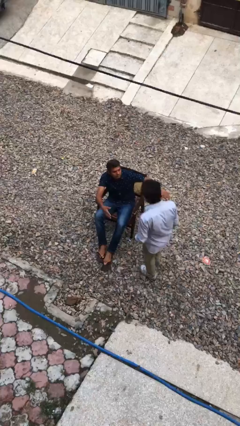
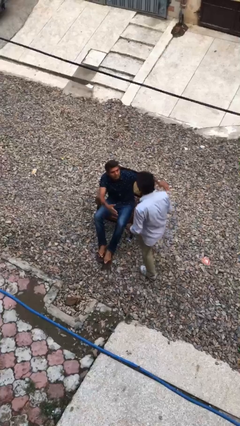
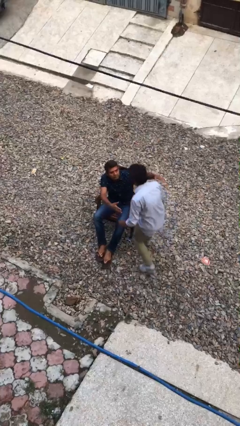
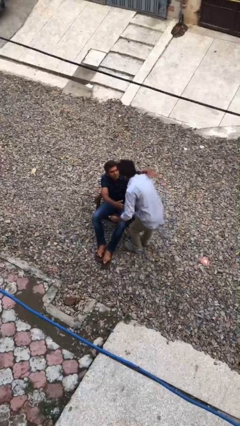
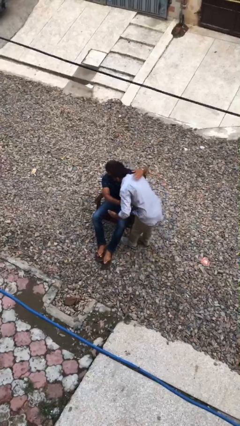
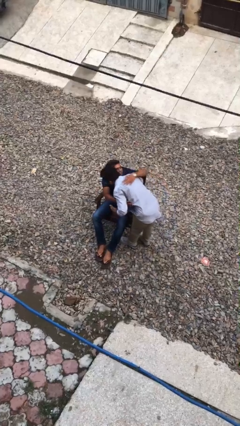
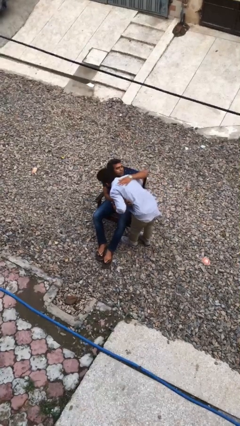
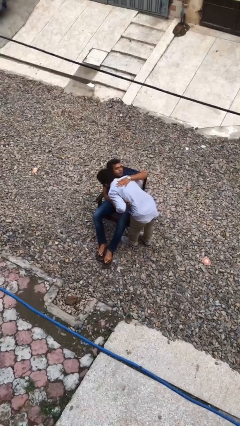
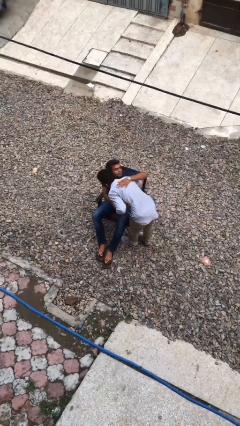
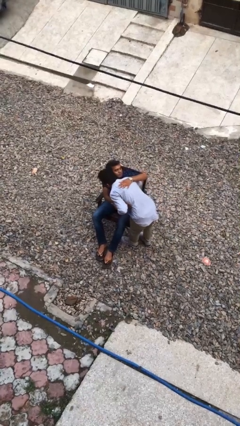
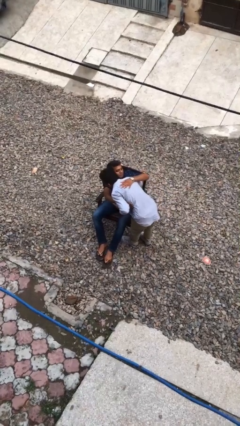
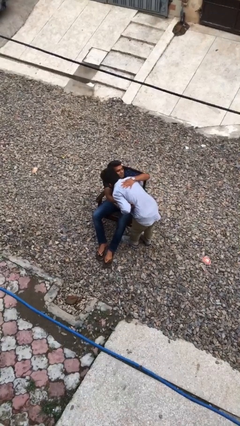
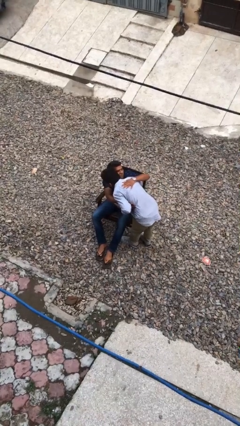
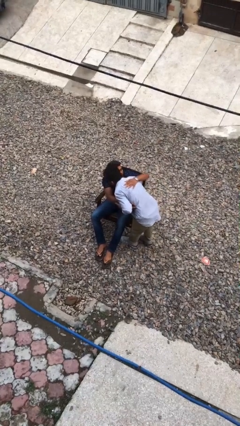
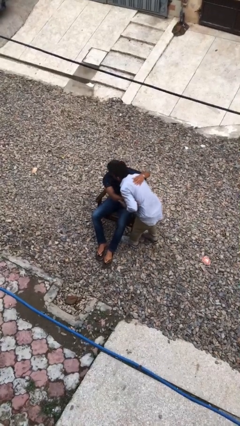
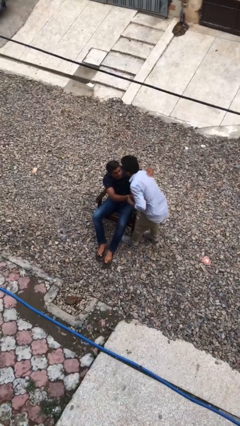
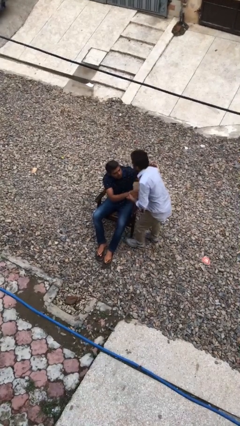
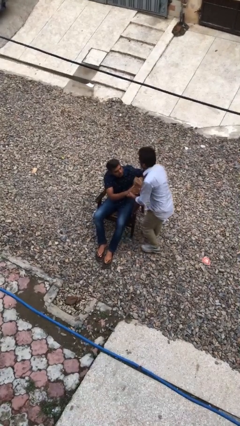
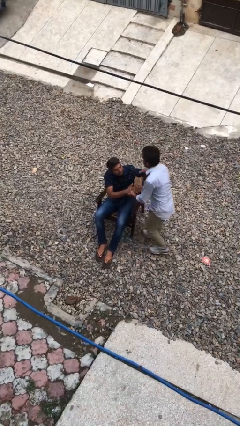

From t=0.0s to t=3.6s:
person embraces person

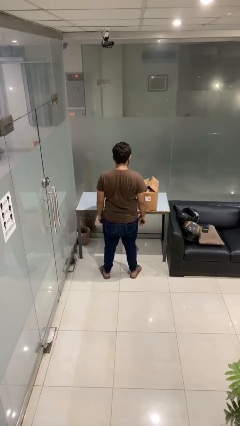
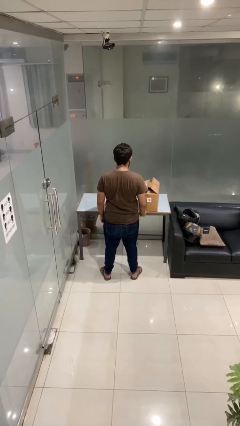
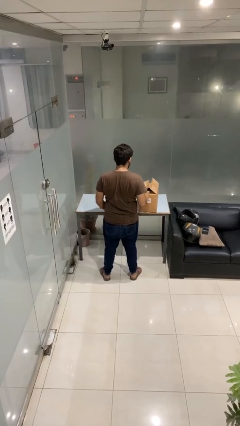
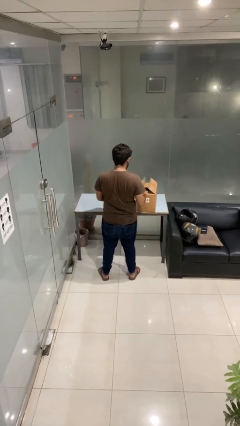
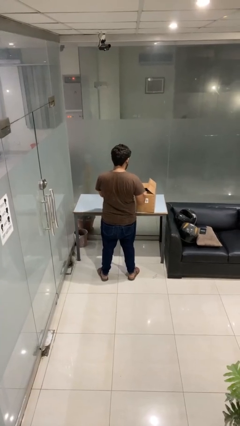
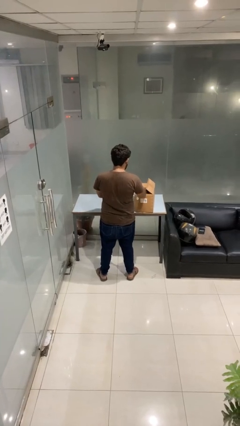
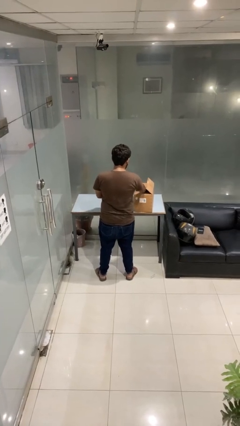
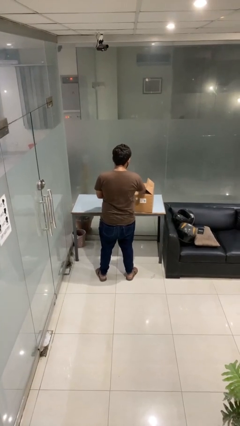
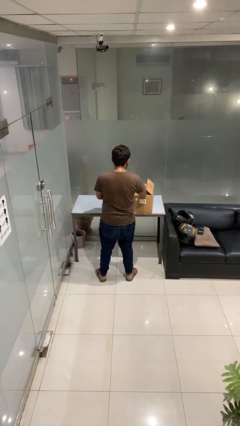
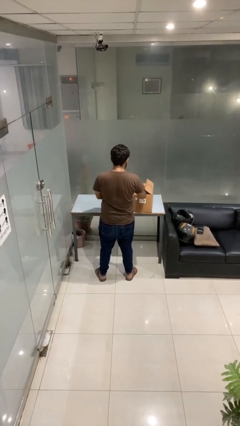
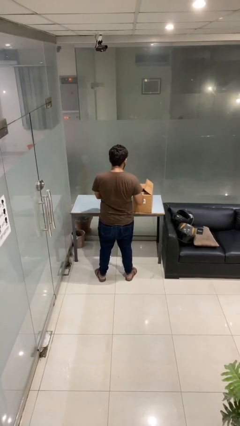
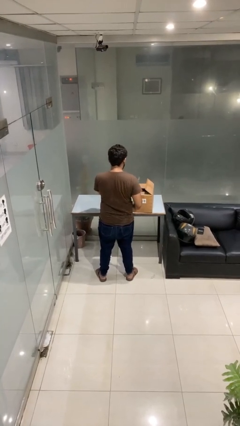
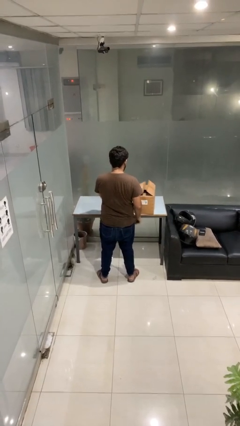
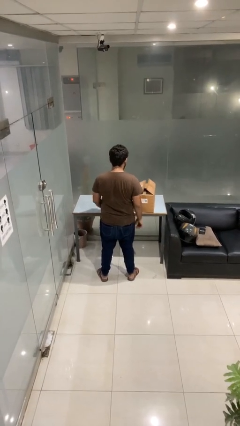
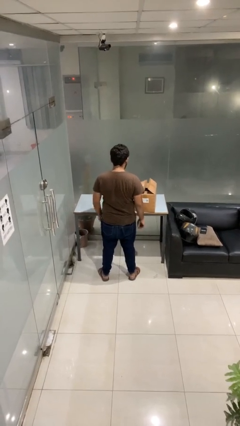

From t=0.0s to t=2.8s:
person searches in box

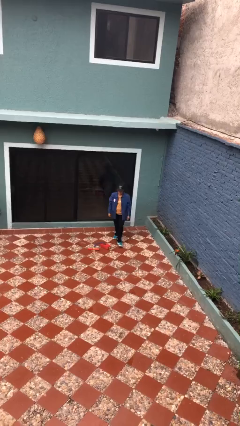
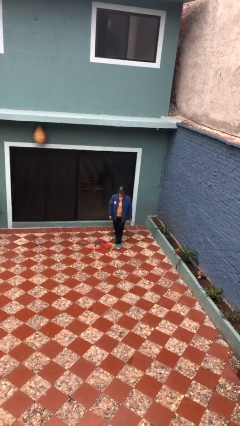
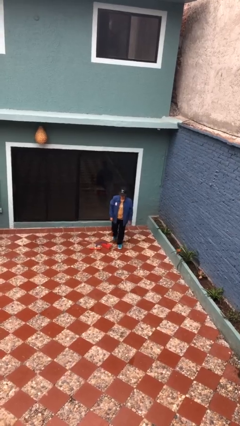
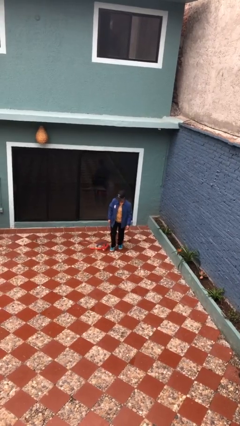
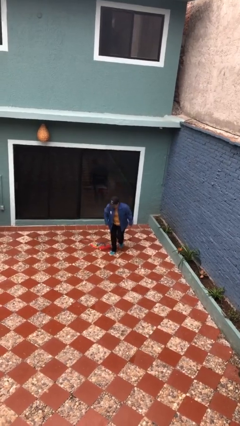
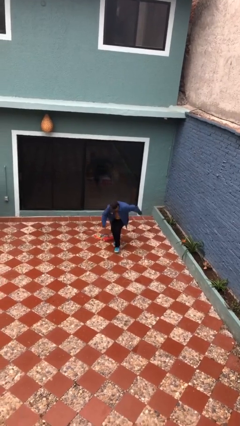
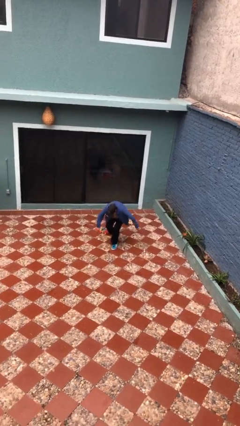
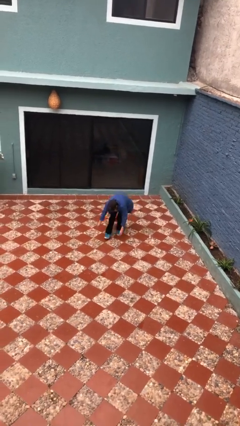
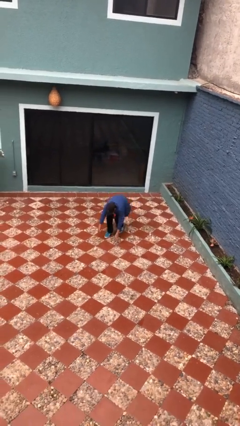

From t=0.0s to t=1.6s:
person trips on object on floor

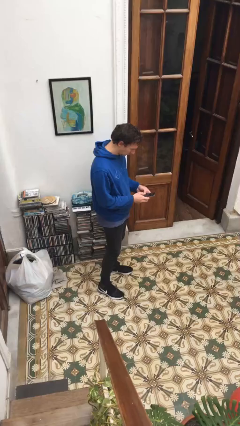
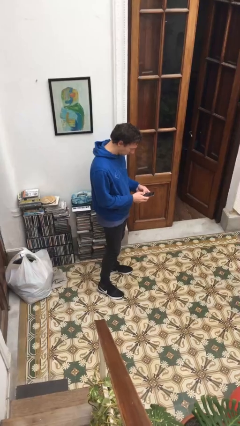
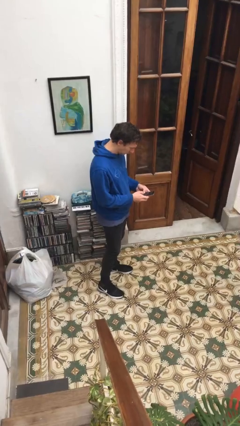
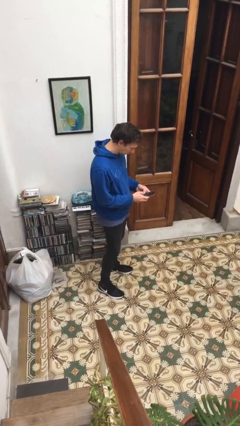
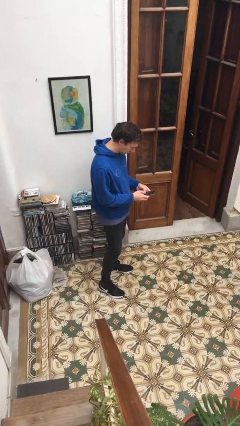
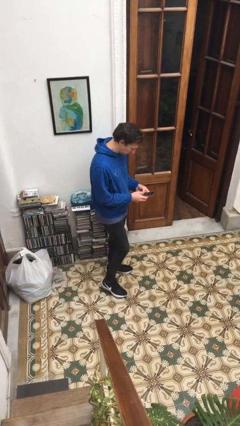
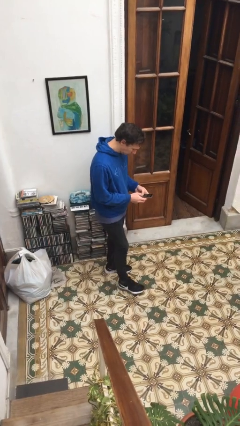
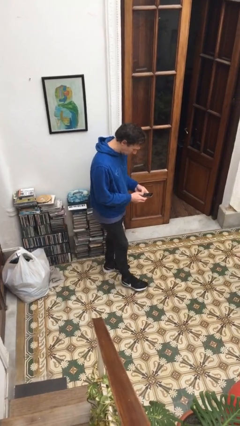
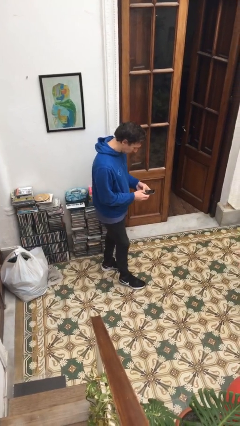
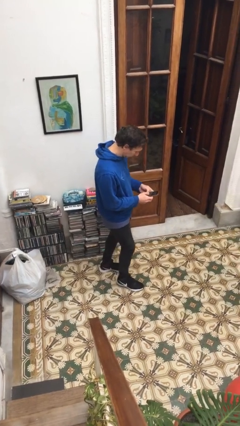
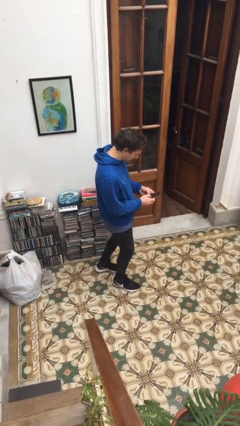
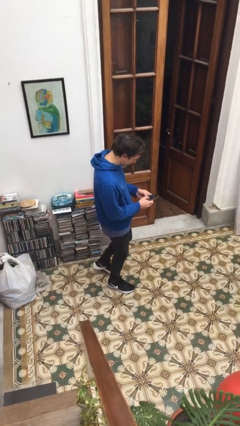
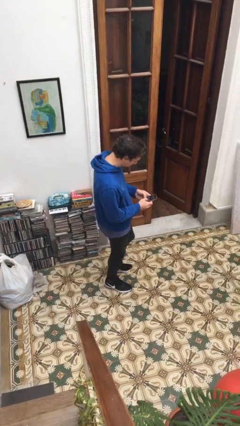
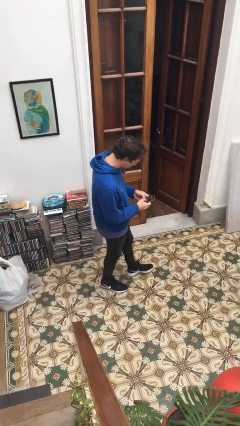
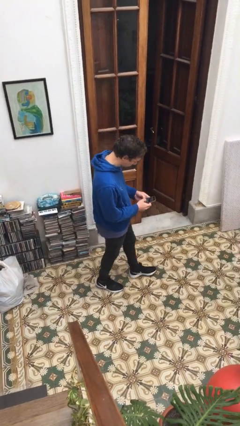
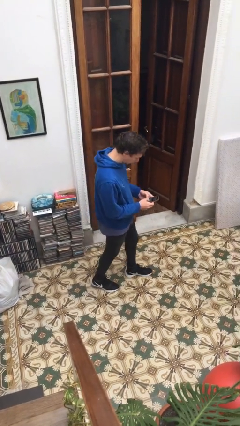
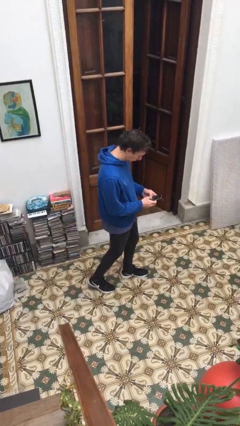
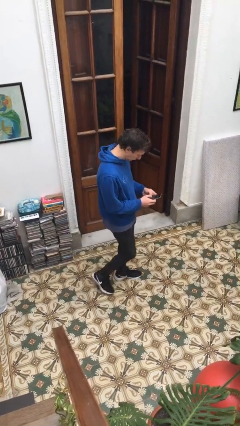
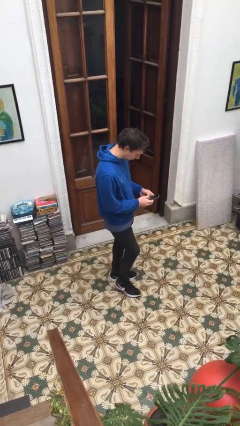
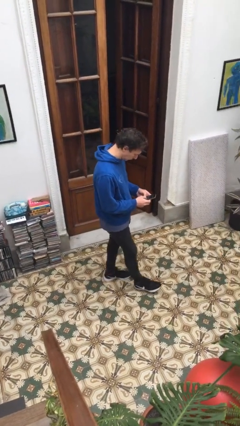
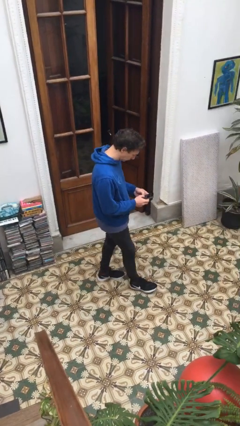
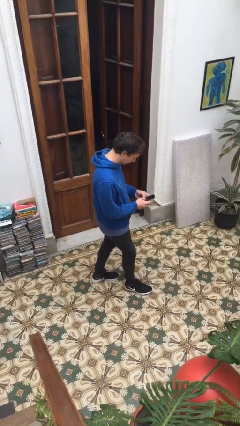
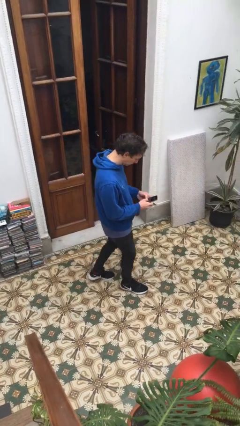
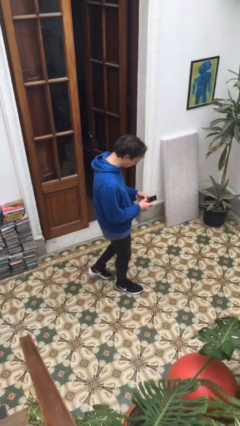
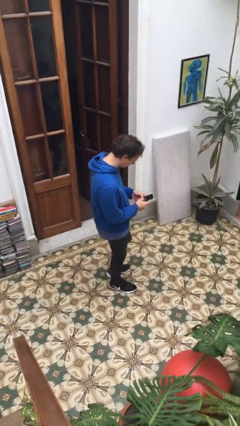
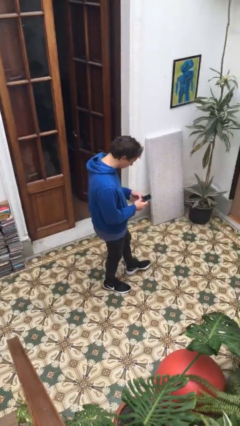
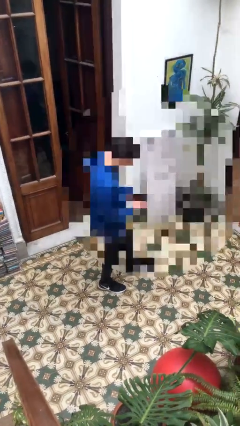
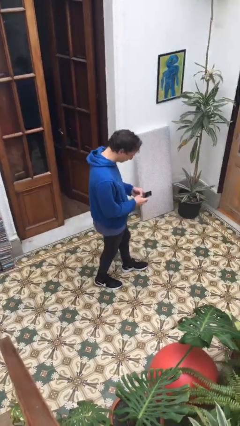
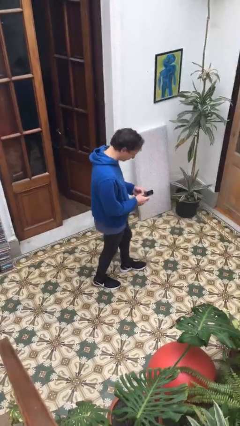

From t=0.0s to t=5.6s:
person texts on phone

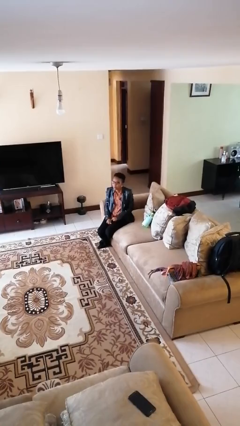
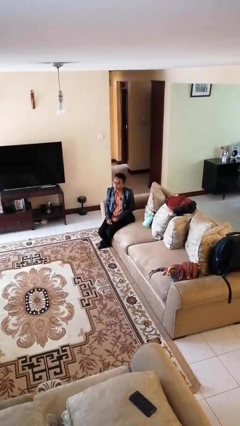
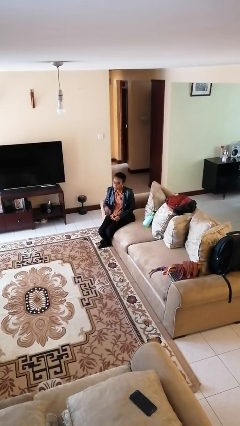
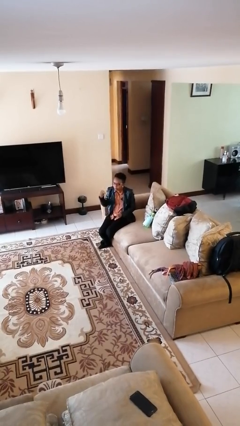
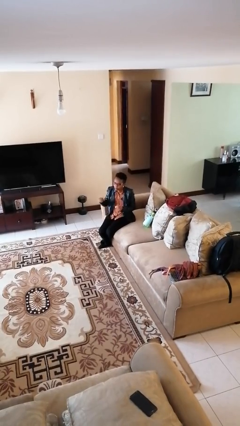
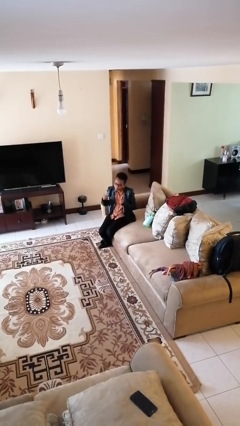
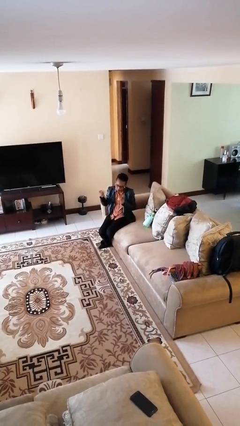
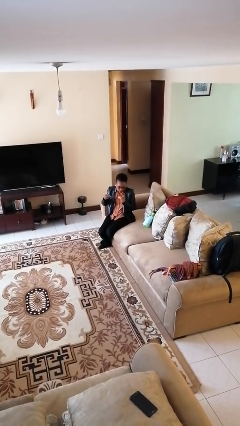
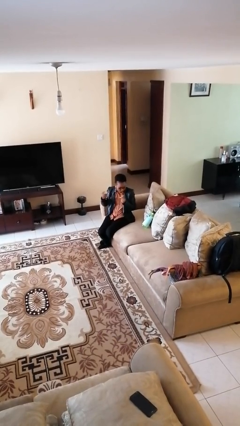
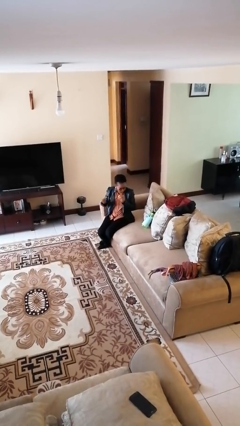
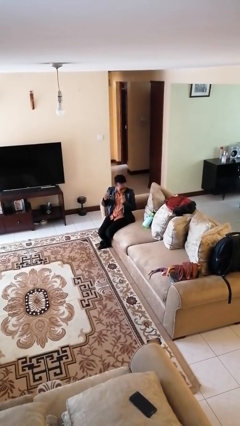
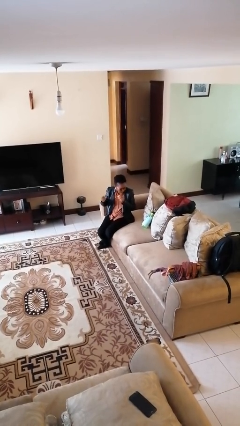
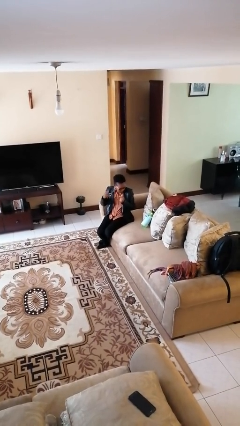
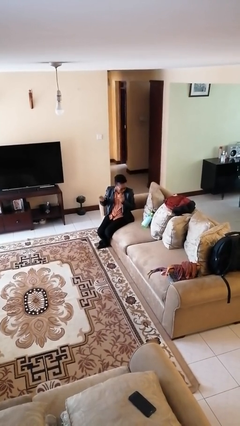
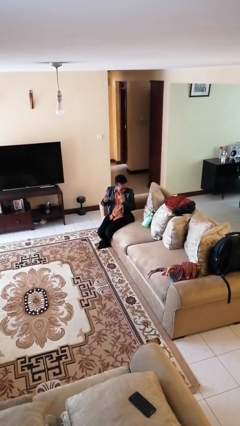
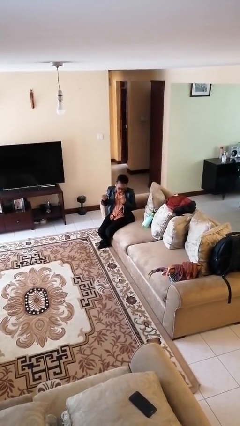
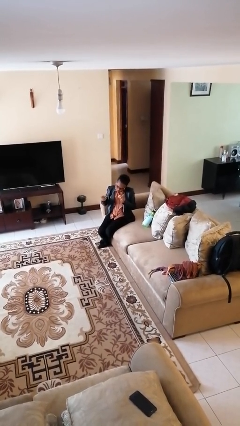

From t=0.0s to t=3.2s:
person snaps fingers

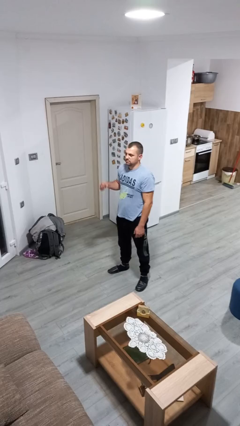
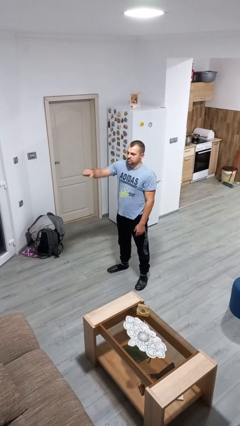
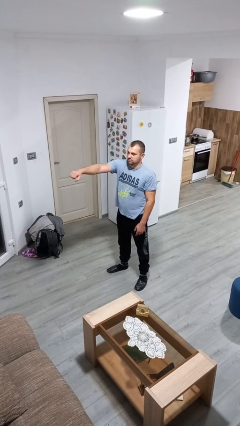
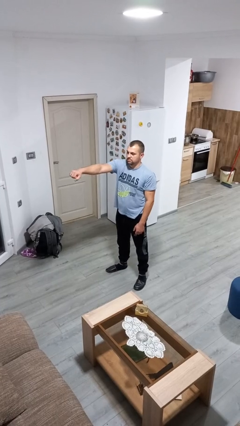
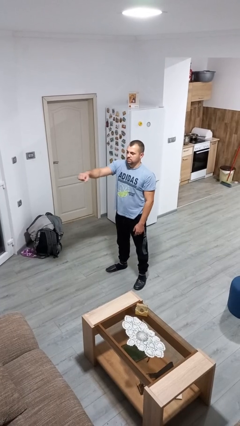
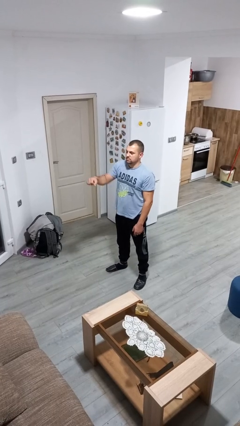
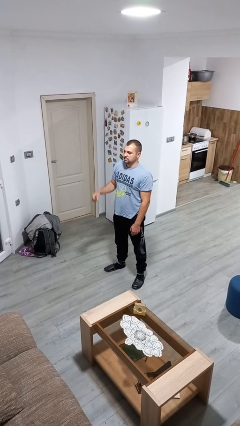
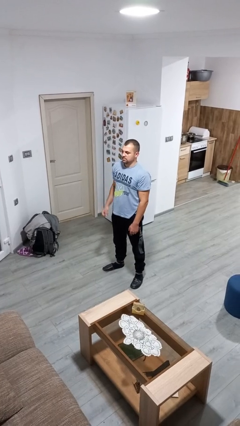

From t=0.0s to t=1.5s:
person punches
